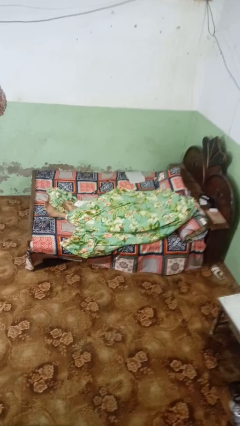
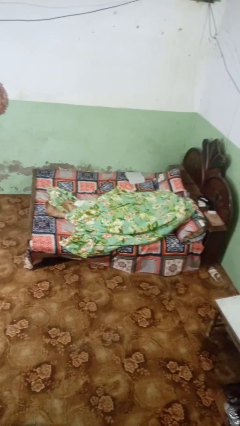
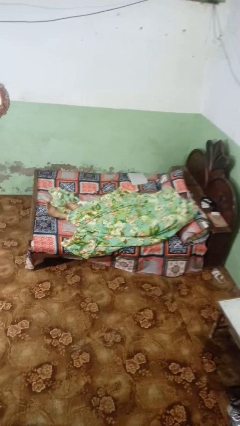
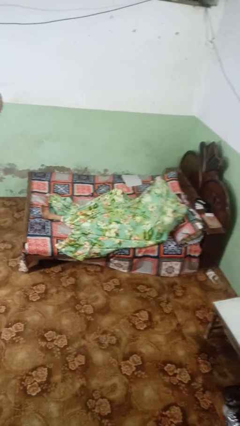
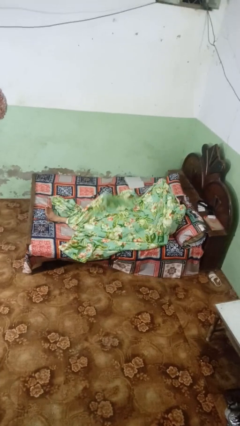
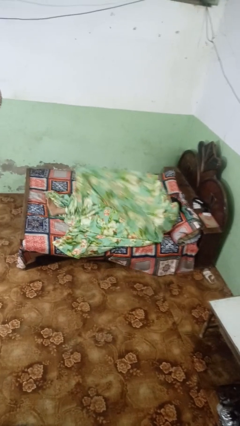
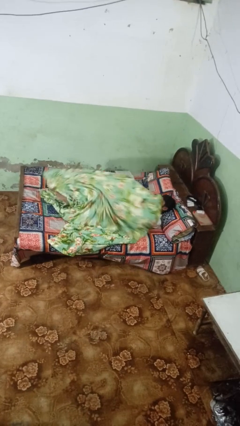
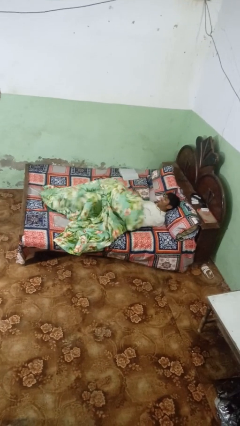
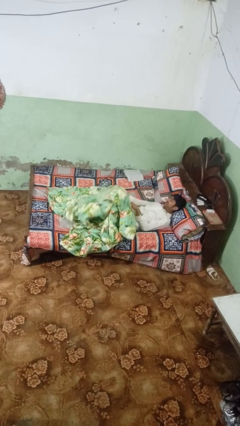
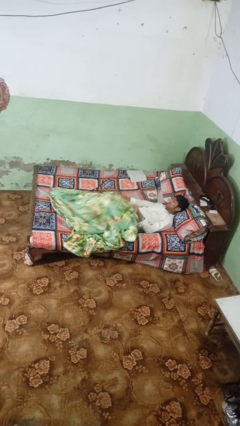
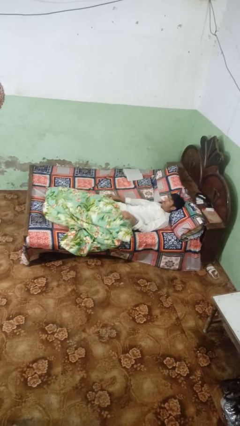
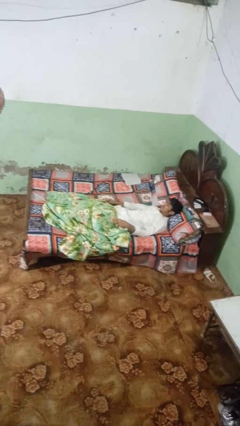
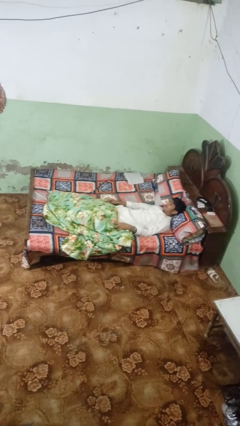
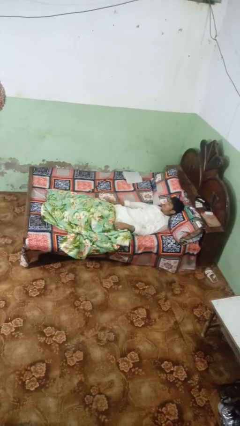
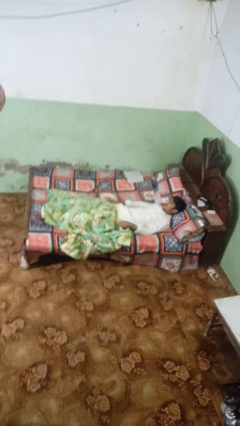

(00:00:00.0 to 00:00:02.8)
person uncovers with bedsheets

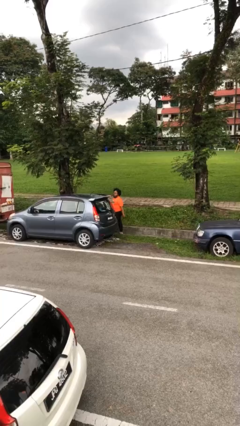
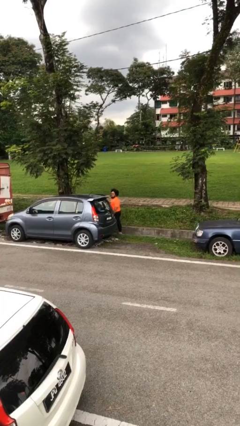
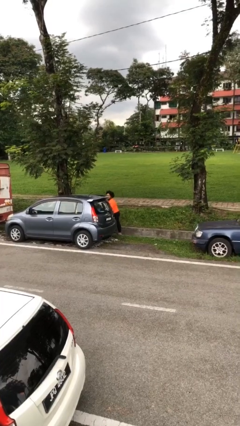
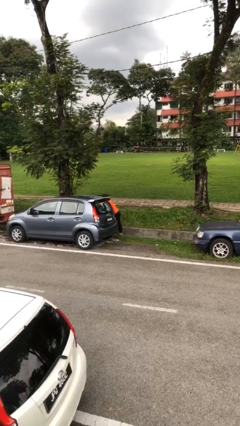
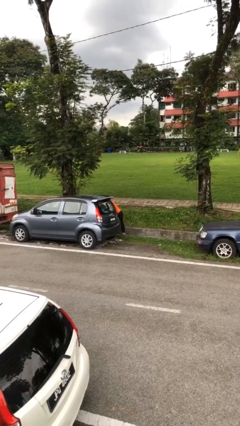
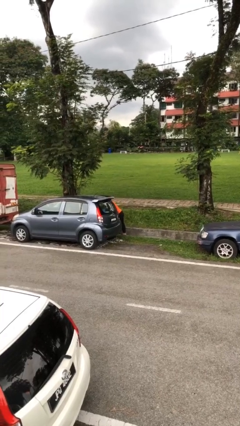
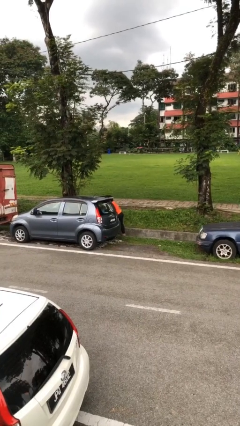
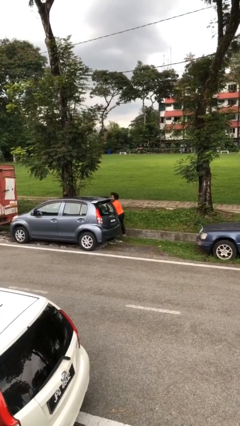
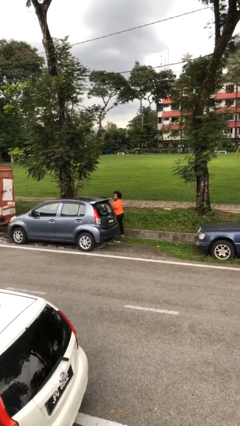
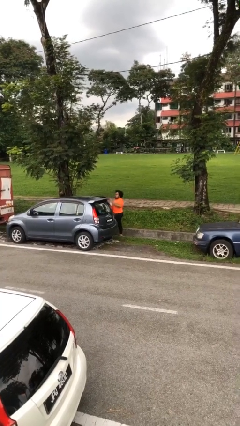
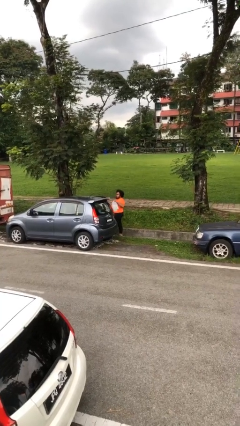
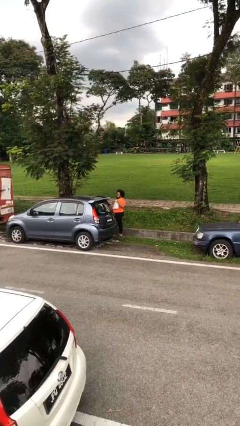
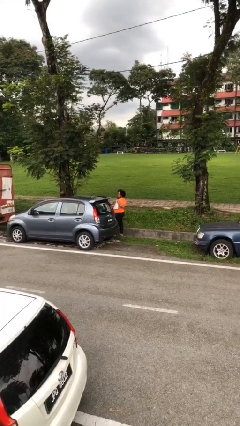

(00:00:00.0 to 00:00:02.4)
person unloads car

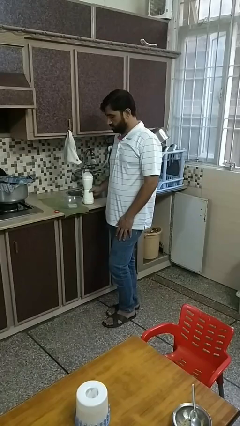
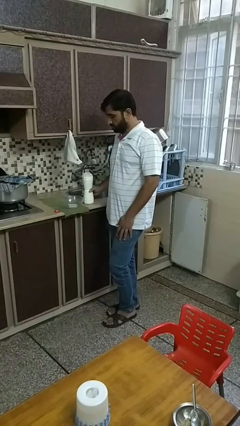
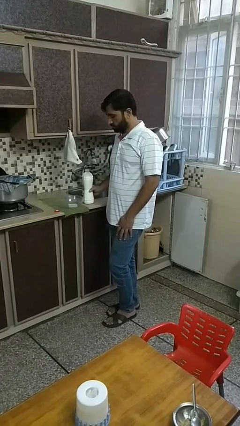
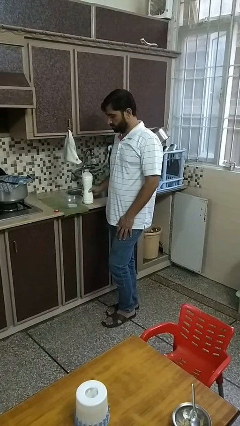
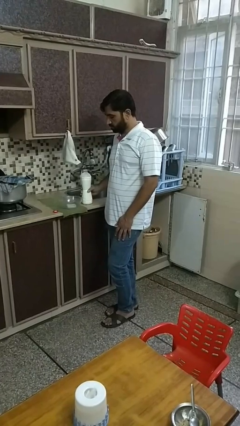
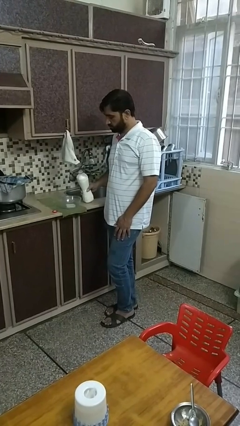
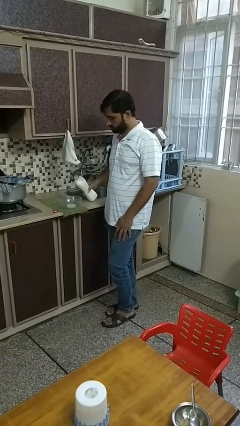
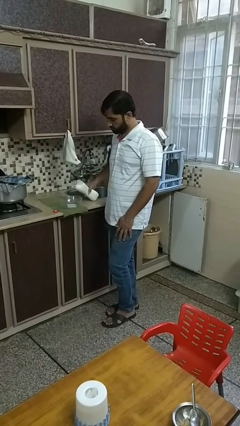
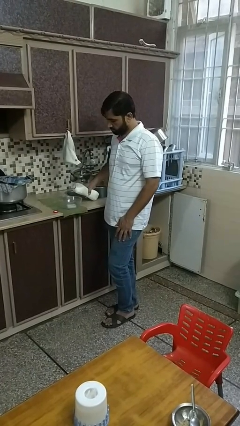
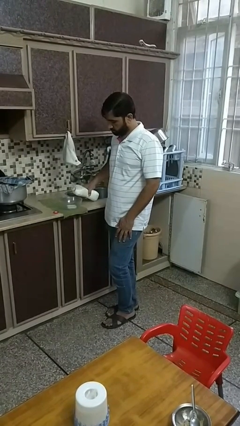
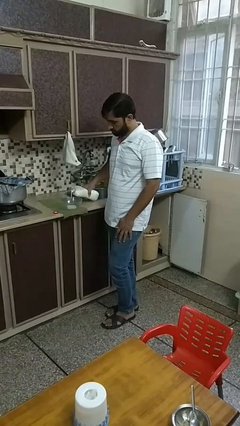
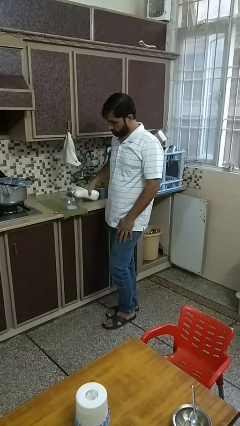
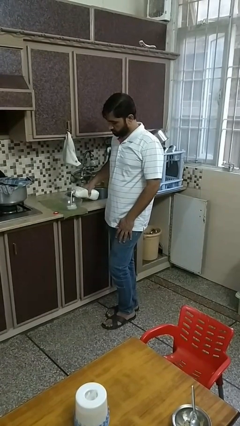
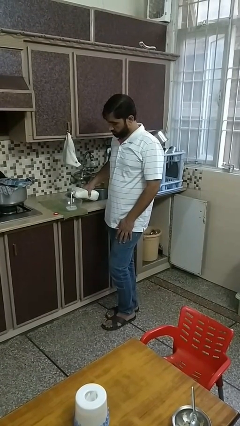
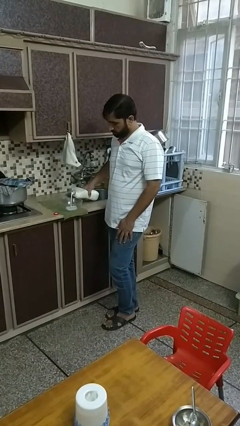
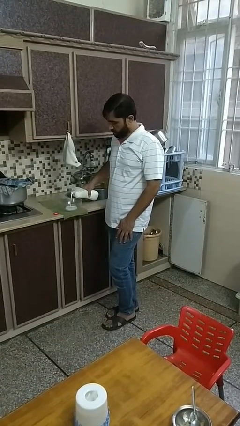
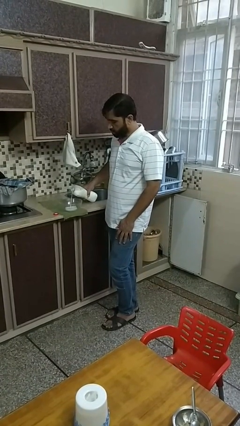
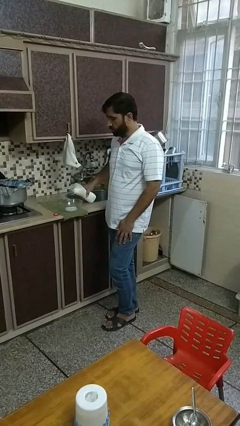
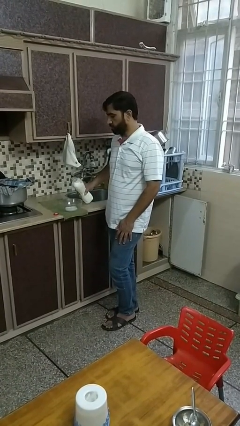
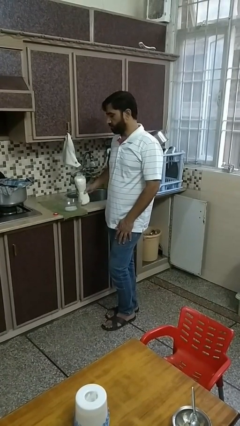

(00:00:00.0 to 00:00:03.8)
person pours into bowl

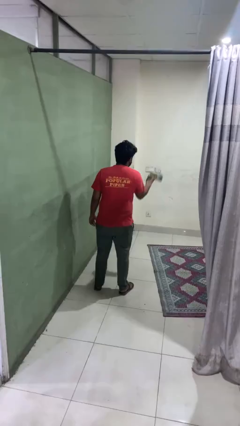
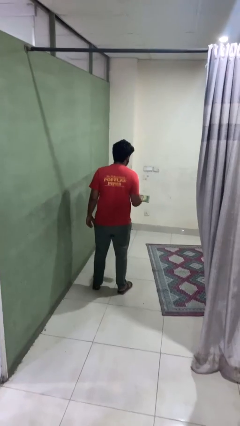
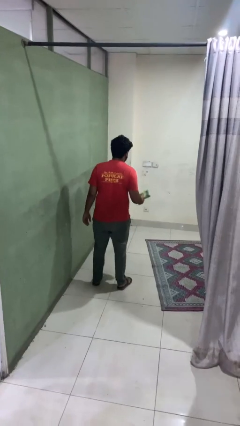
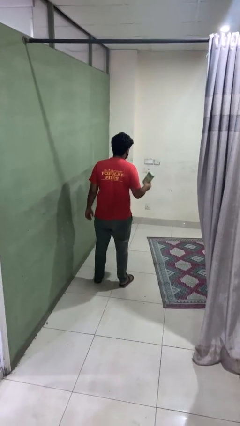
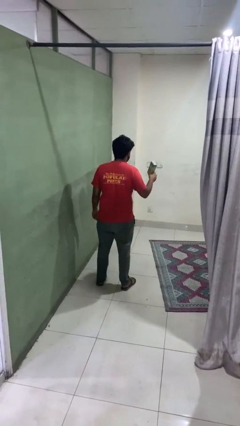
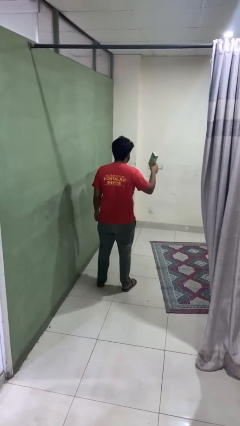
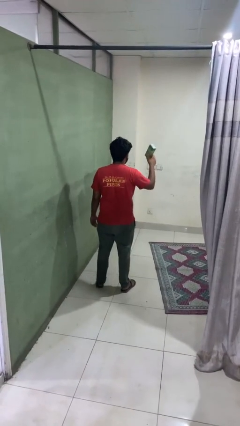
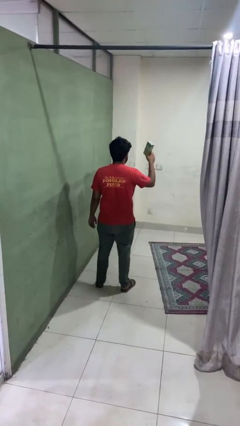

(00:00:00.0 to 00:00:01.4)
person catches dropped object

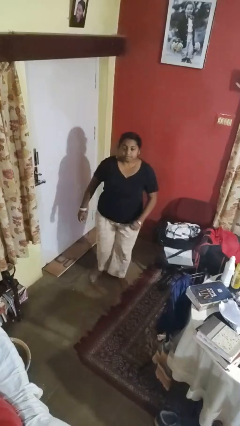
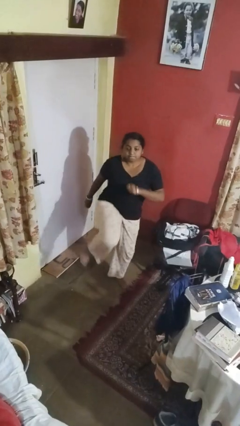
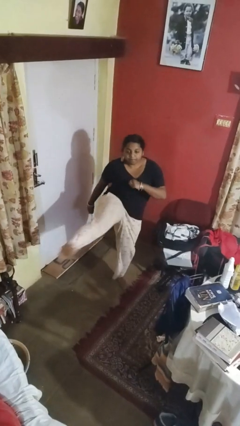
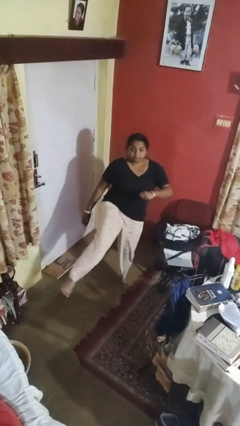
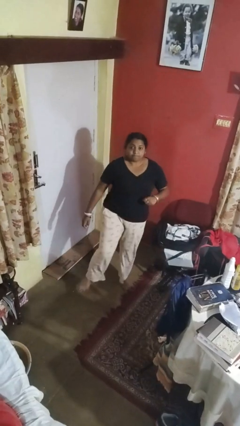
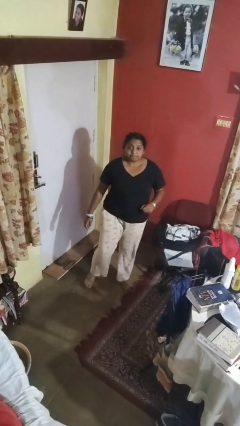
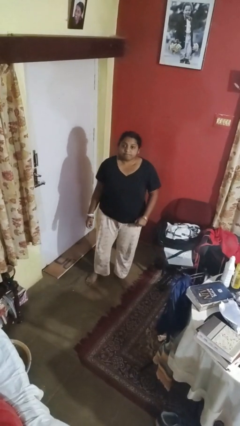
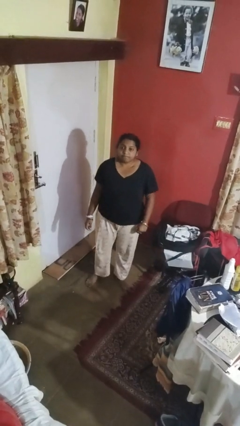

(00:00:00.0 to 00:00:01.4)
person karate kicks

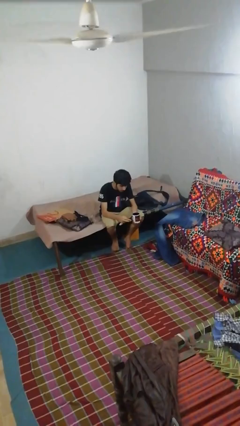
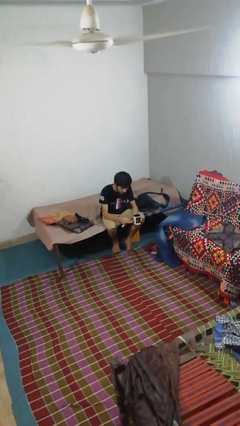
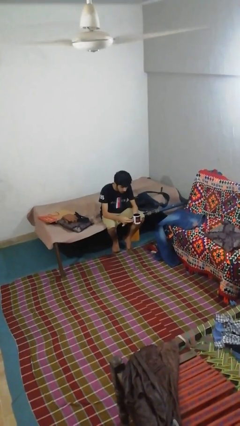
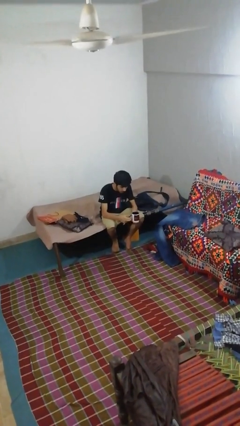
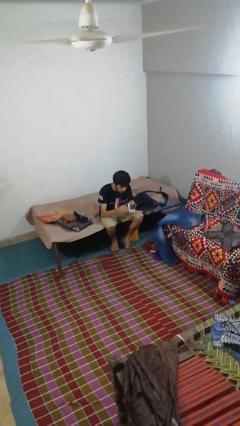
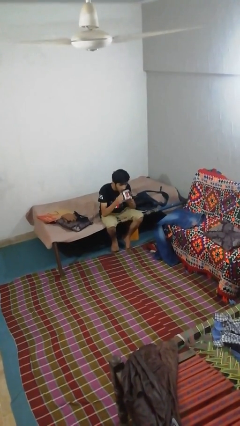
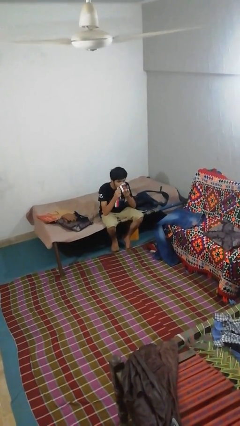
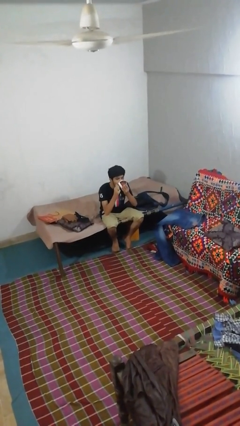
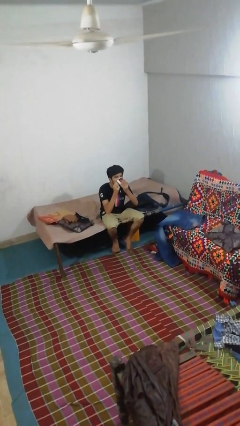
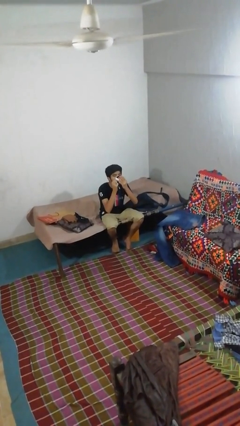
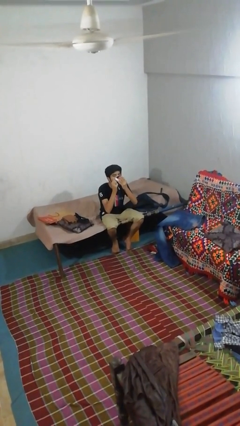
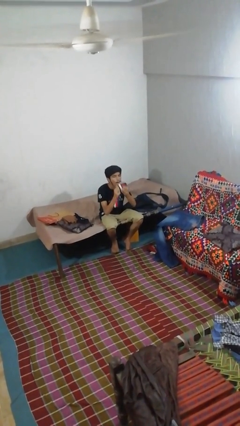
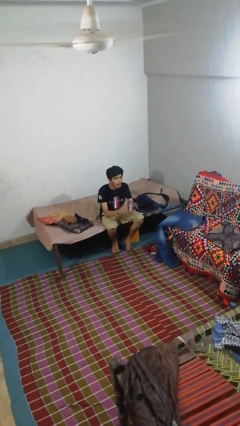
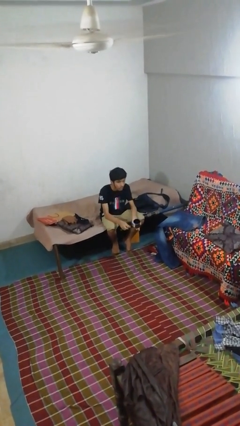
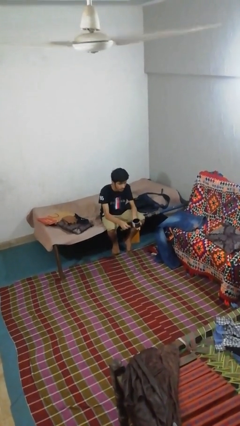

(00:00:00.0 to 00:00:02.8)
person drinks from mug

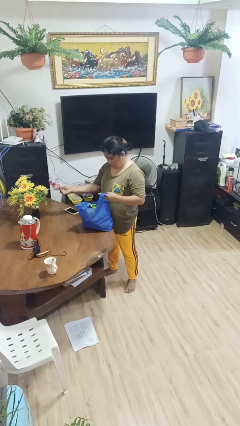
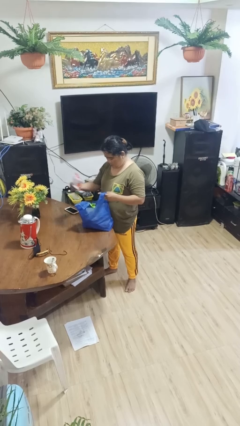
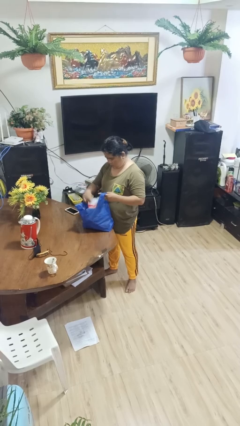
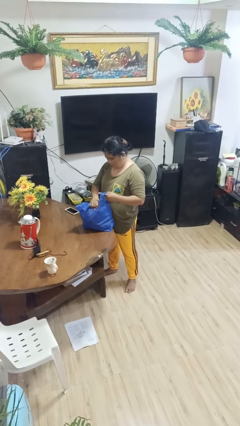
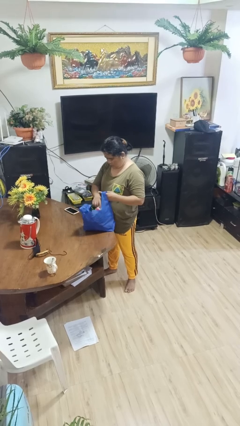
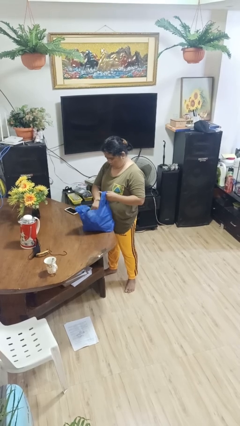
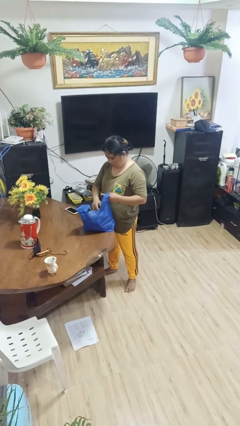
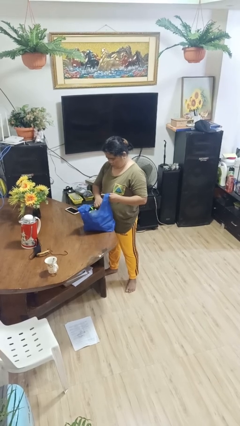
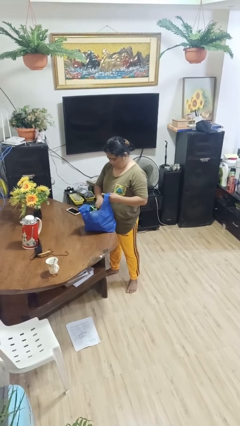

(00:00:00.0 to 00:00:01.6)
person puts object into bag

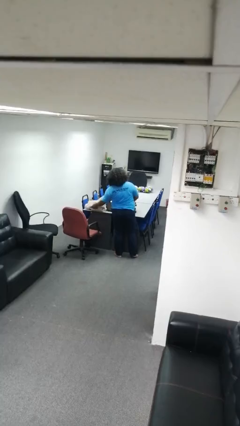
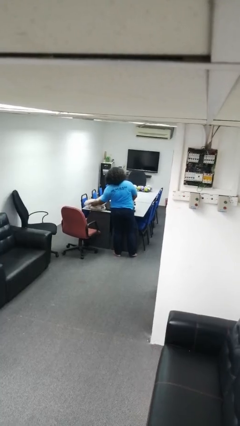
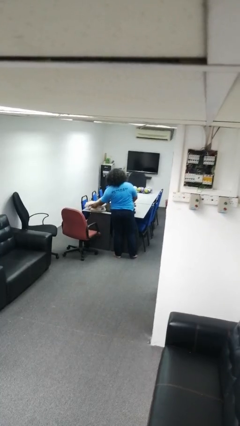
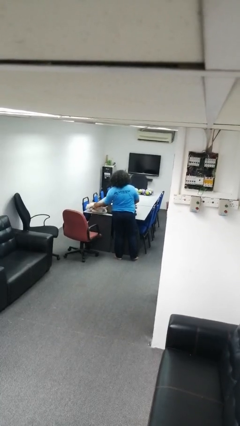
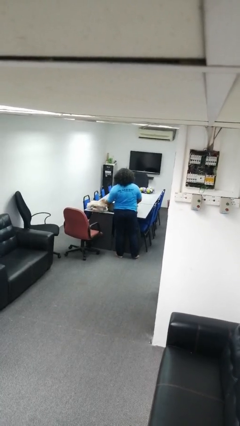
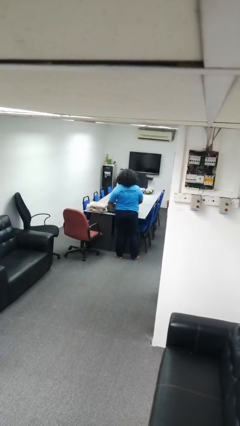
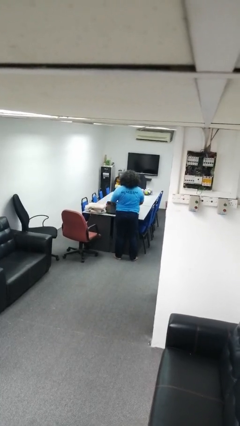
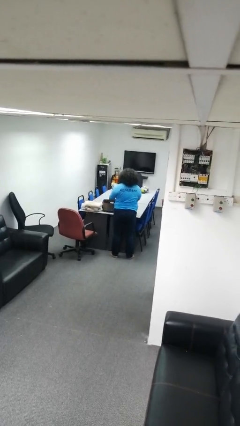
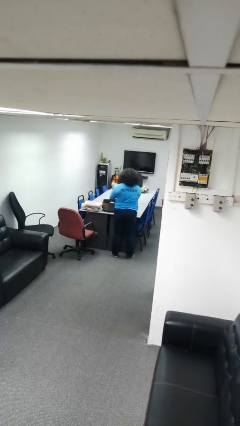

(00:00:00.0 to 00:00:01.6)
person unloads clothes from suitcase
